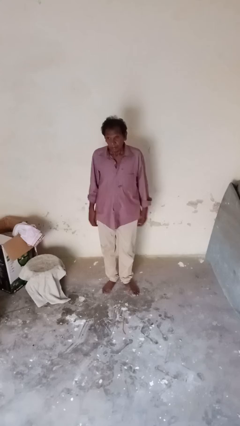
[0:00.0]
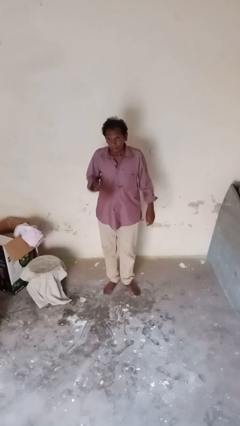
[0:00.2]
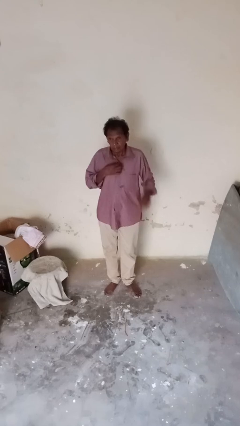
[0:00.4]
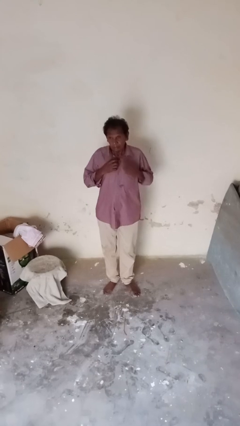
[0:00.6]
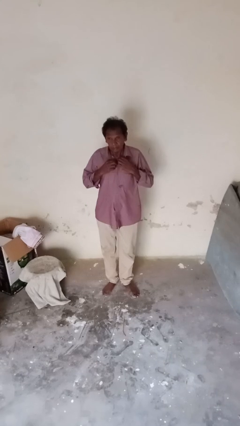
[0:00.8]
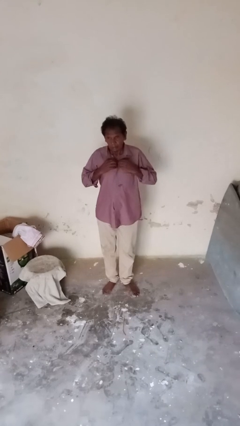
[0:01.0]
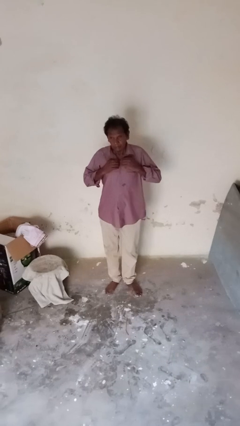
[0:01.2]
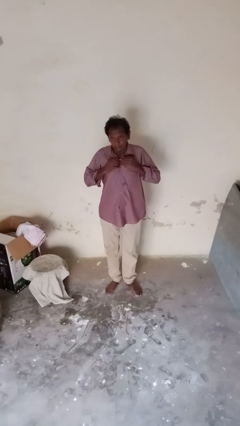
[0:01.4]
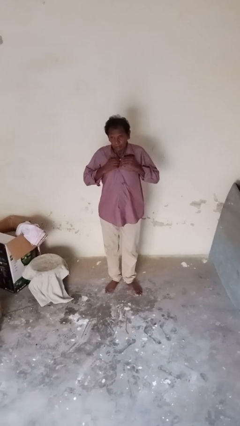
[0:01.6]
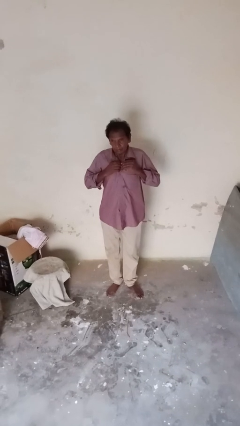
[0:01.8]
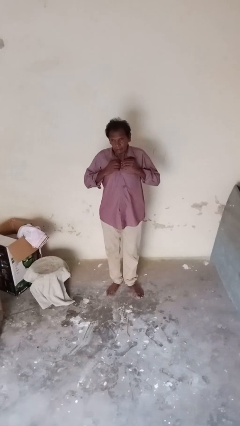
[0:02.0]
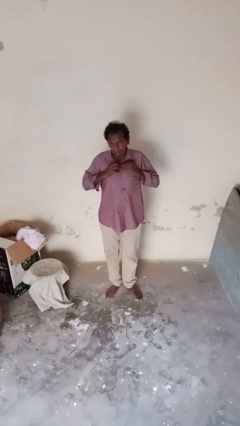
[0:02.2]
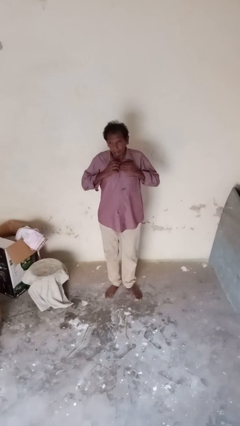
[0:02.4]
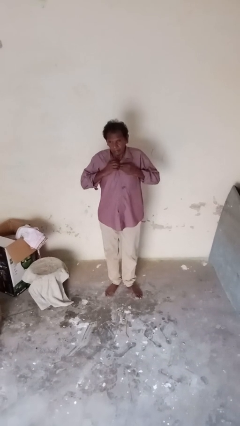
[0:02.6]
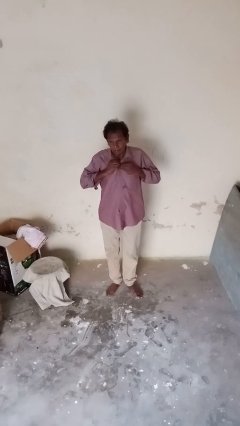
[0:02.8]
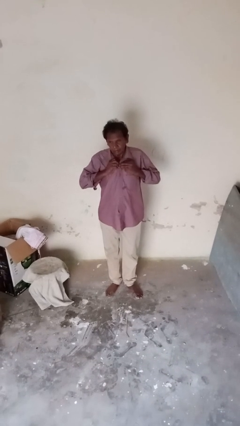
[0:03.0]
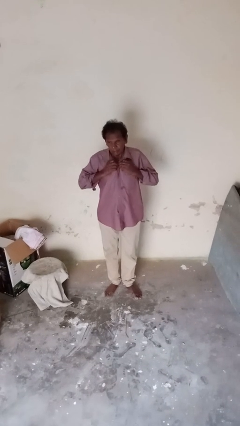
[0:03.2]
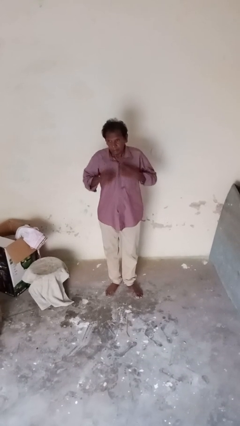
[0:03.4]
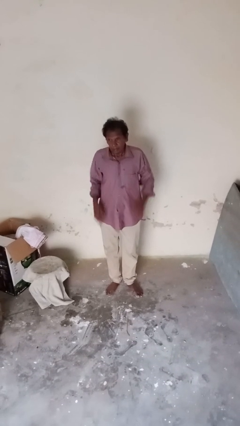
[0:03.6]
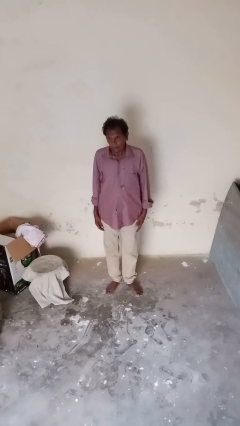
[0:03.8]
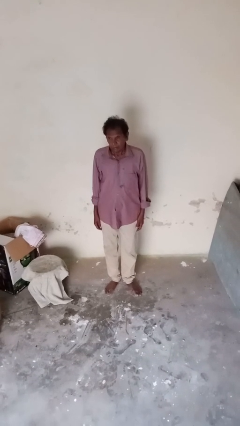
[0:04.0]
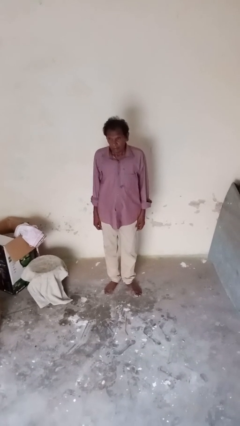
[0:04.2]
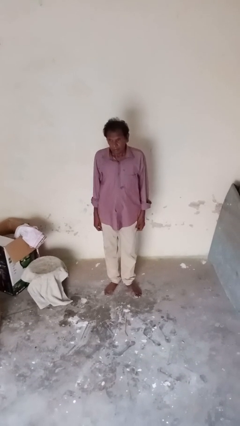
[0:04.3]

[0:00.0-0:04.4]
person buttons shirt

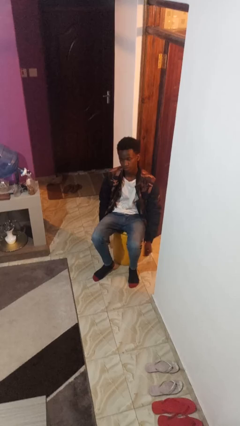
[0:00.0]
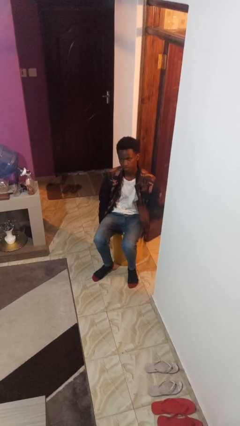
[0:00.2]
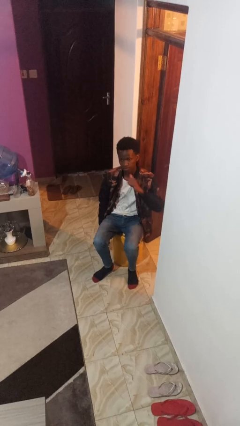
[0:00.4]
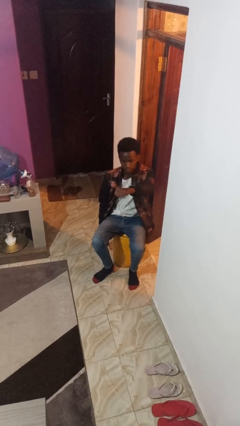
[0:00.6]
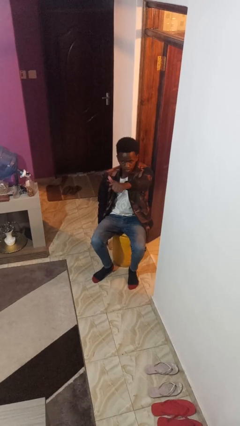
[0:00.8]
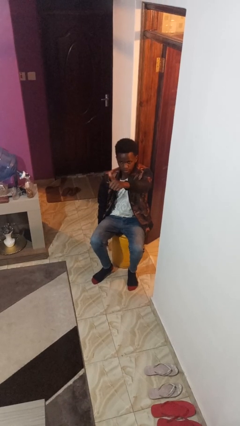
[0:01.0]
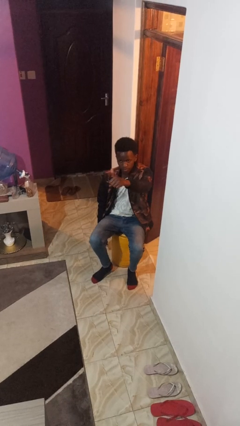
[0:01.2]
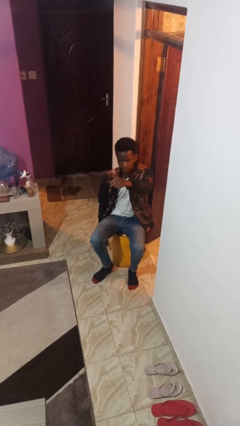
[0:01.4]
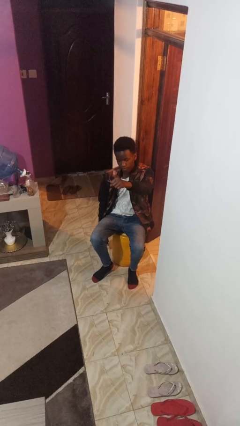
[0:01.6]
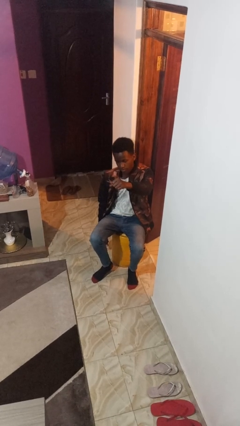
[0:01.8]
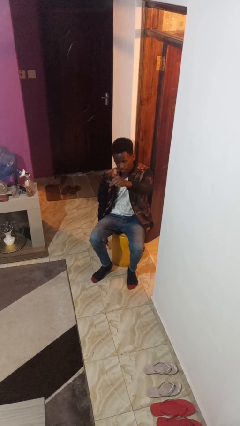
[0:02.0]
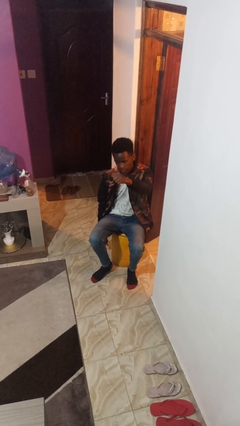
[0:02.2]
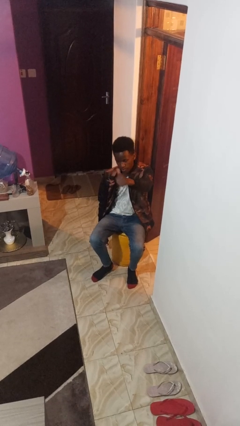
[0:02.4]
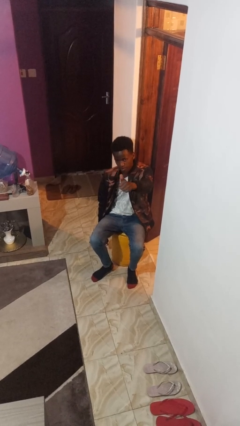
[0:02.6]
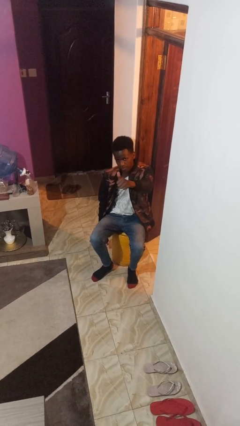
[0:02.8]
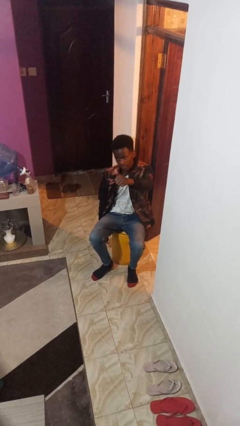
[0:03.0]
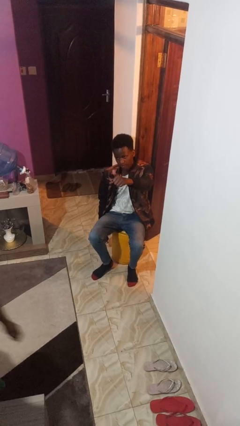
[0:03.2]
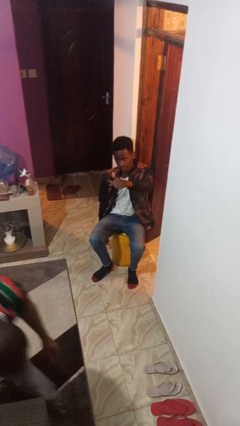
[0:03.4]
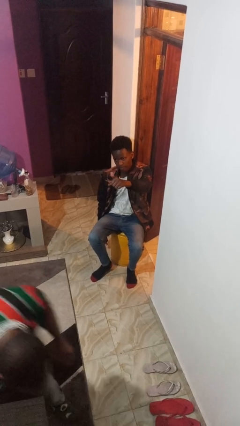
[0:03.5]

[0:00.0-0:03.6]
person gestures thumbs up

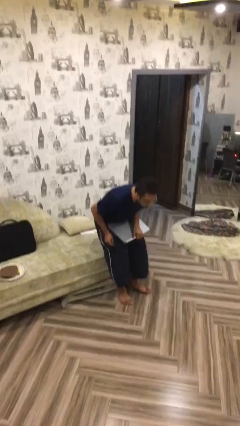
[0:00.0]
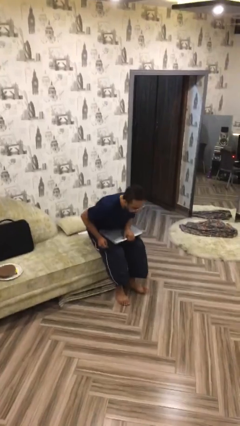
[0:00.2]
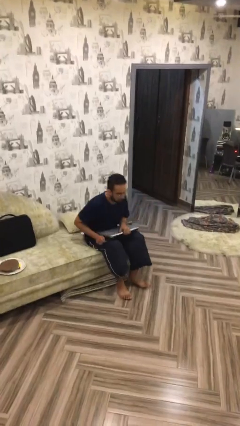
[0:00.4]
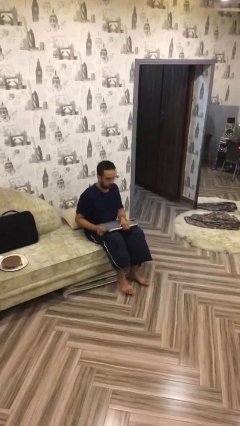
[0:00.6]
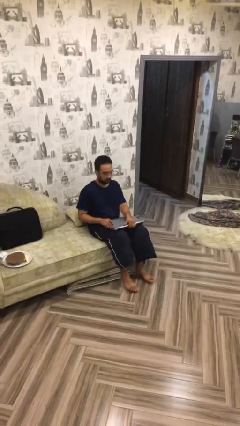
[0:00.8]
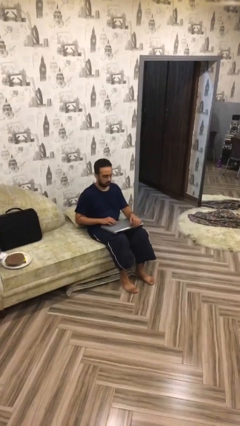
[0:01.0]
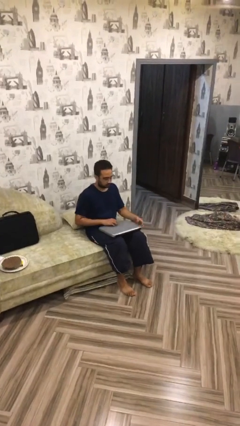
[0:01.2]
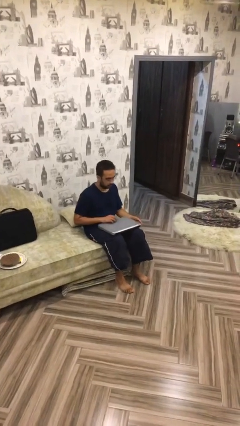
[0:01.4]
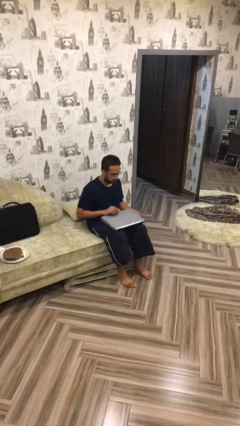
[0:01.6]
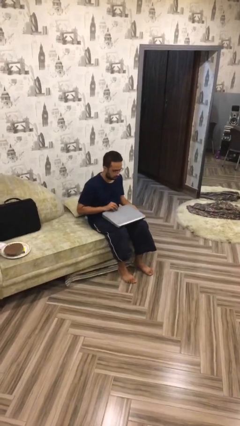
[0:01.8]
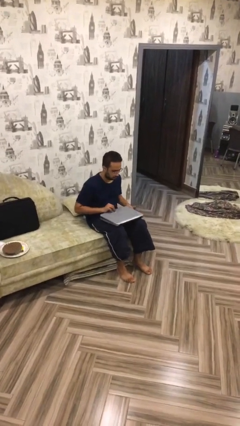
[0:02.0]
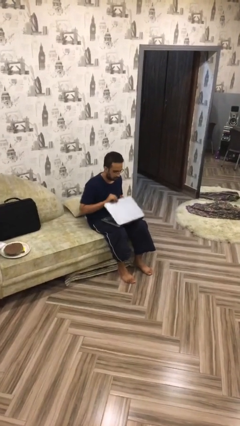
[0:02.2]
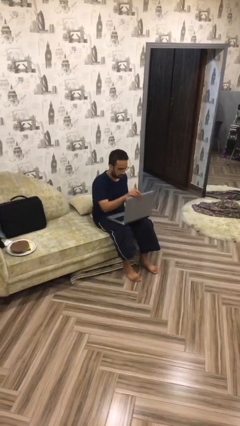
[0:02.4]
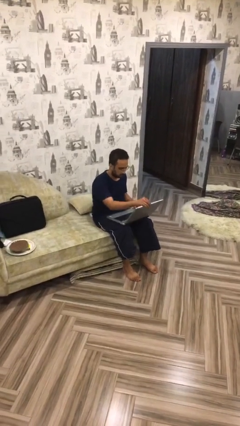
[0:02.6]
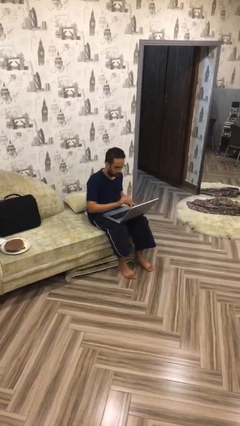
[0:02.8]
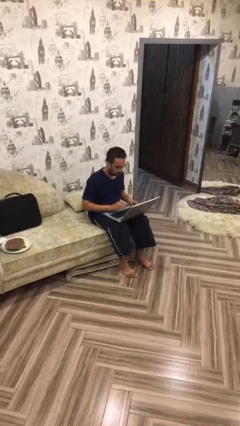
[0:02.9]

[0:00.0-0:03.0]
person sits down

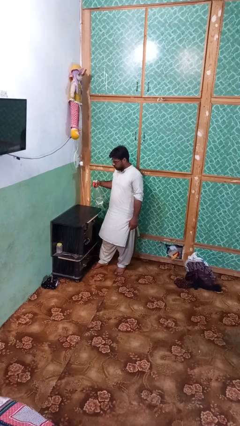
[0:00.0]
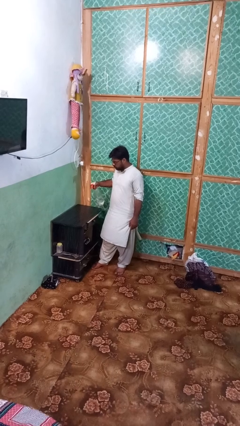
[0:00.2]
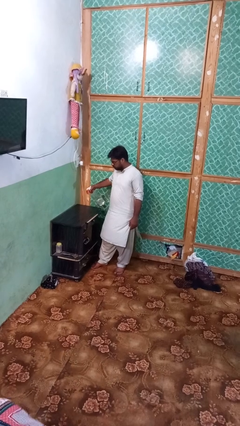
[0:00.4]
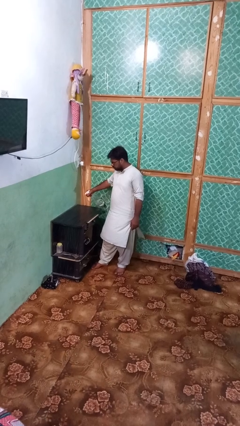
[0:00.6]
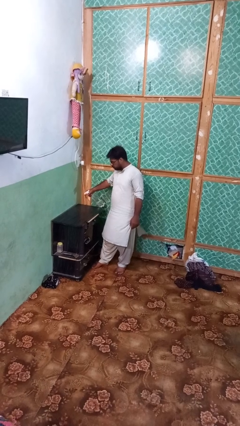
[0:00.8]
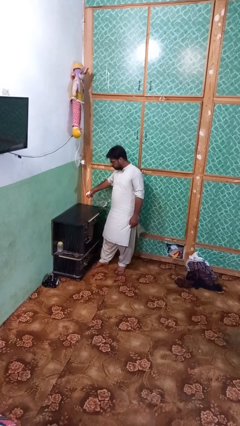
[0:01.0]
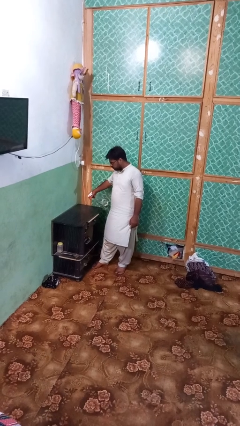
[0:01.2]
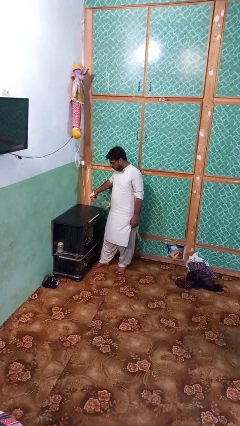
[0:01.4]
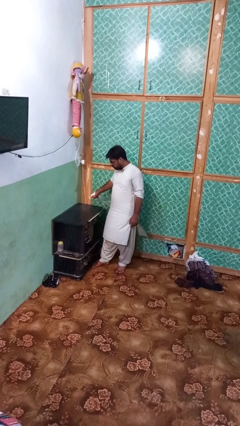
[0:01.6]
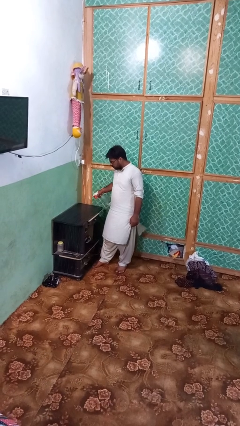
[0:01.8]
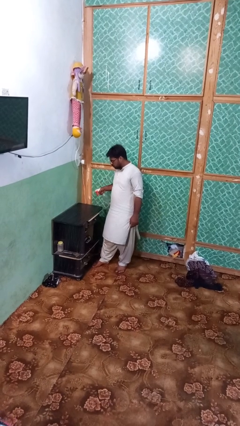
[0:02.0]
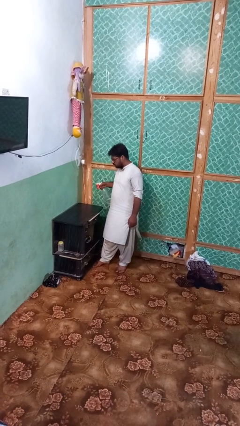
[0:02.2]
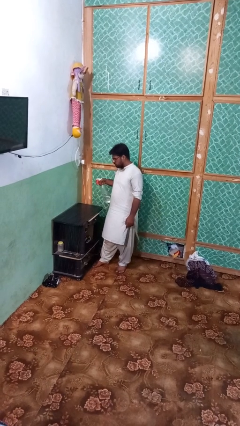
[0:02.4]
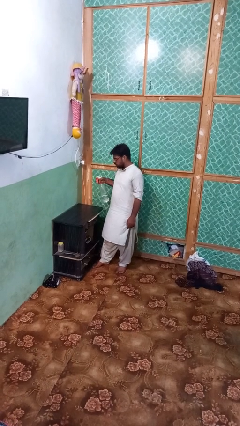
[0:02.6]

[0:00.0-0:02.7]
person sprays from bottle

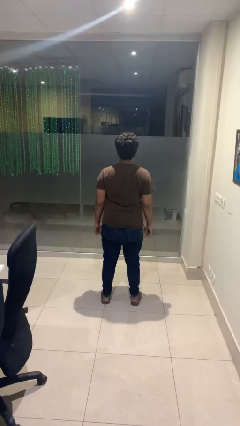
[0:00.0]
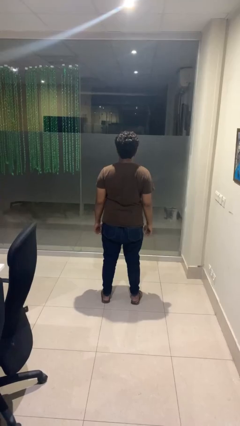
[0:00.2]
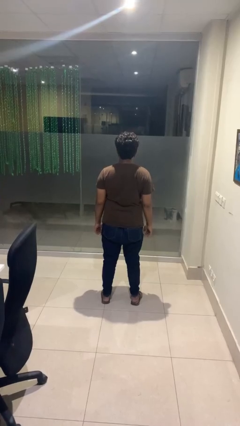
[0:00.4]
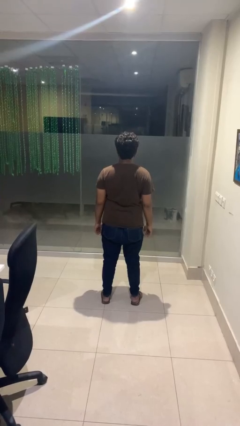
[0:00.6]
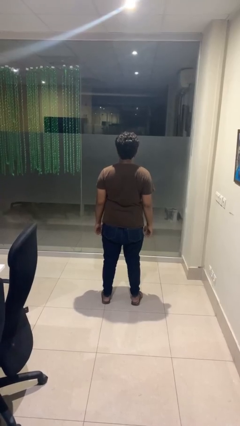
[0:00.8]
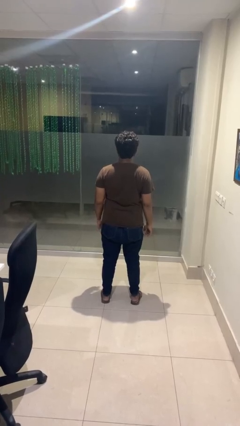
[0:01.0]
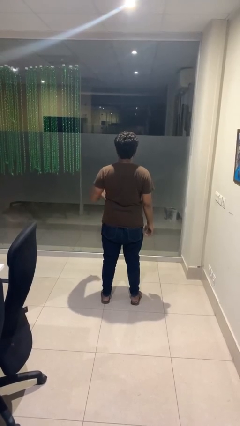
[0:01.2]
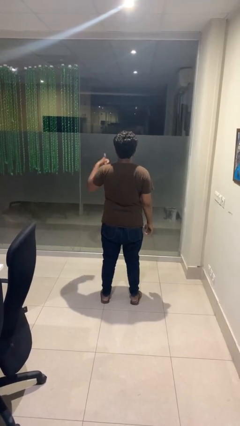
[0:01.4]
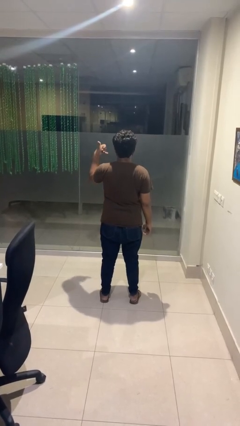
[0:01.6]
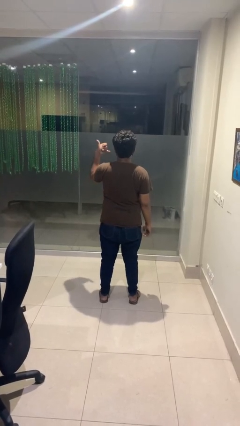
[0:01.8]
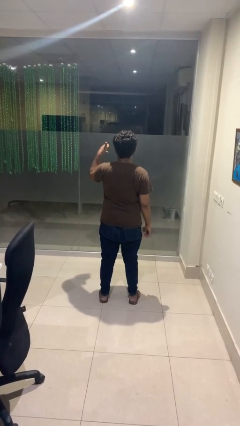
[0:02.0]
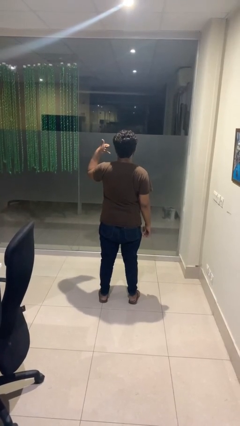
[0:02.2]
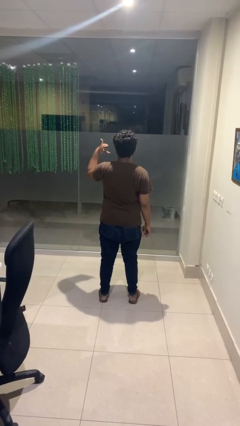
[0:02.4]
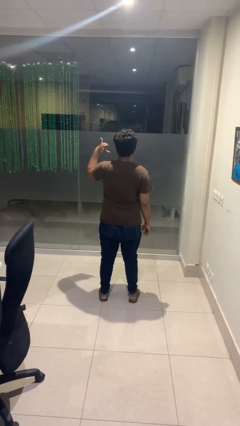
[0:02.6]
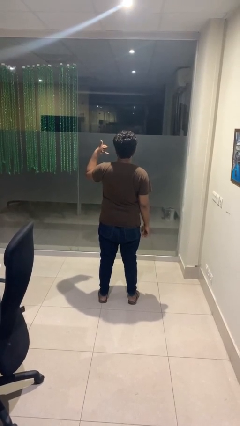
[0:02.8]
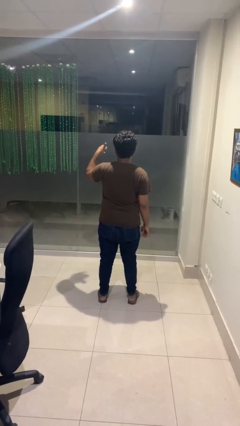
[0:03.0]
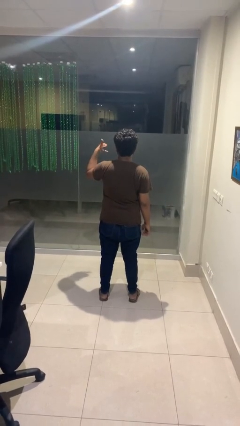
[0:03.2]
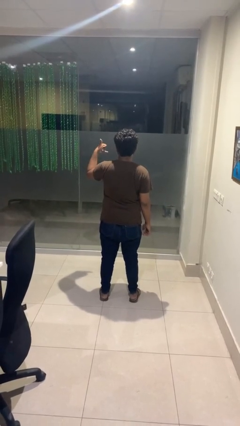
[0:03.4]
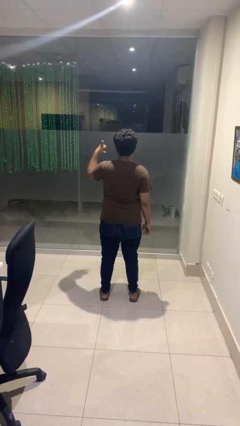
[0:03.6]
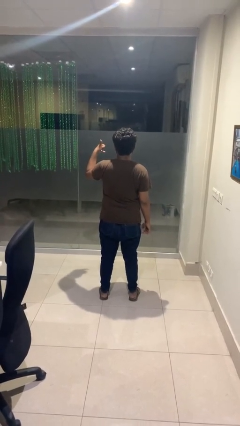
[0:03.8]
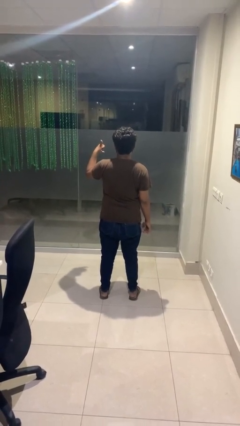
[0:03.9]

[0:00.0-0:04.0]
person gestures hang loose
